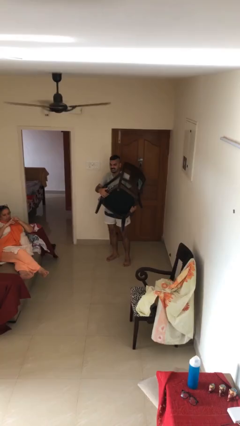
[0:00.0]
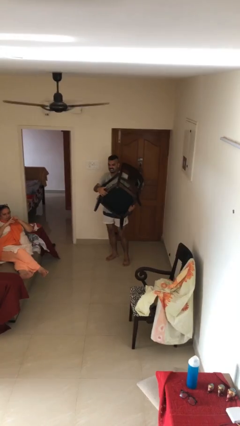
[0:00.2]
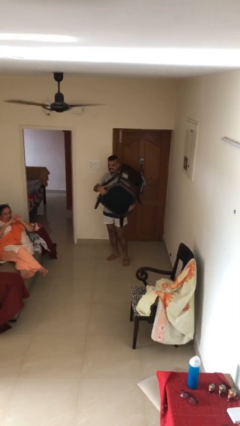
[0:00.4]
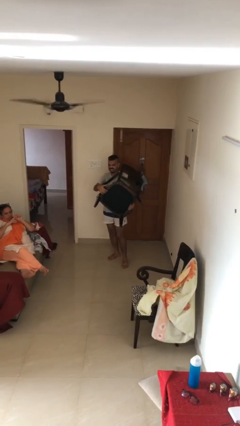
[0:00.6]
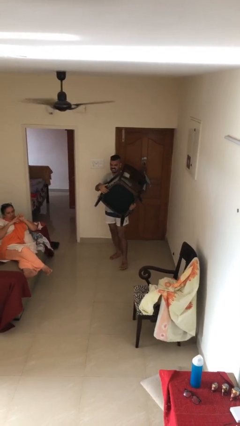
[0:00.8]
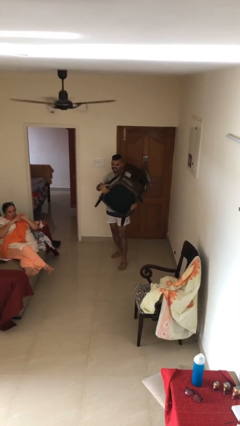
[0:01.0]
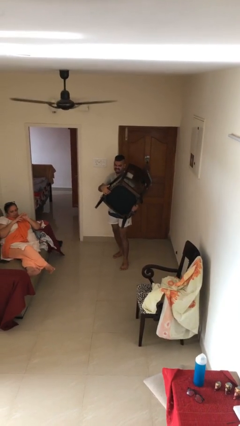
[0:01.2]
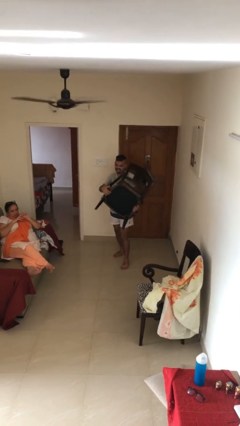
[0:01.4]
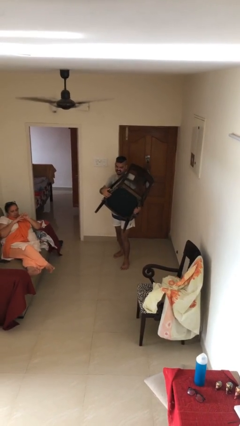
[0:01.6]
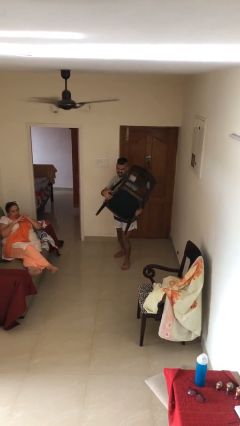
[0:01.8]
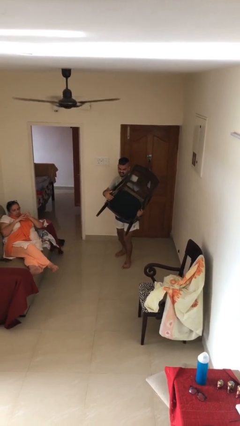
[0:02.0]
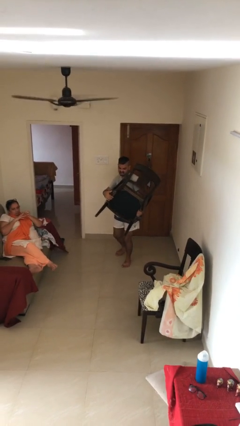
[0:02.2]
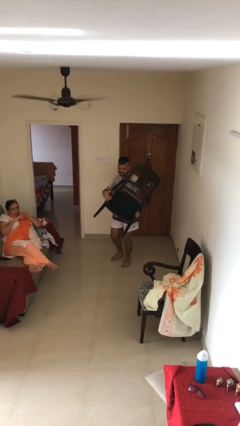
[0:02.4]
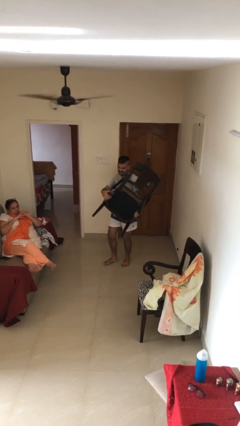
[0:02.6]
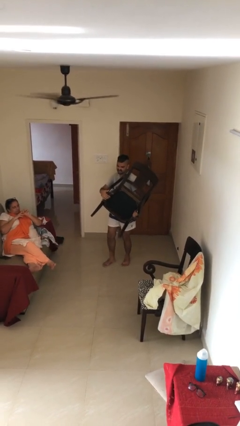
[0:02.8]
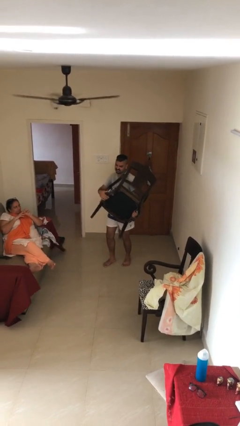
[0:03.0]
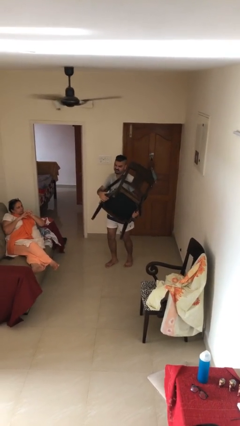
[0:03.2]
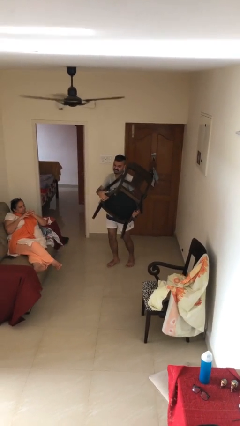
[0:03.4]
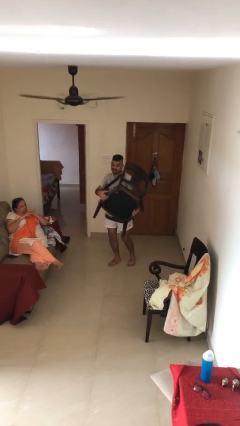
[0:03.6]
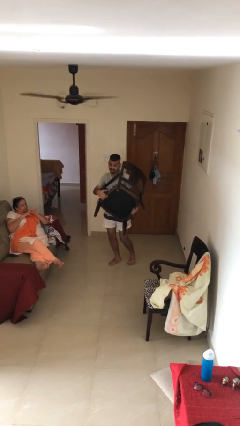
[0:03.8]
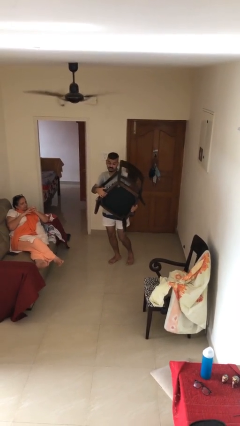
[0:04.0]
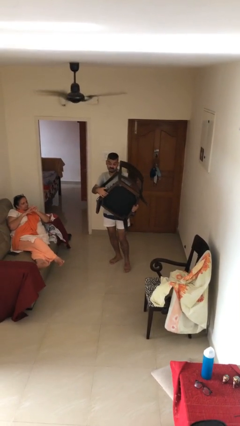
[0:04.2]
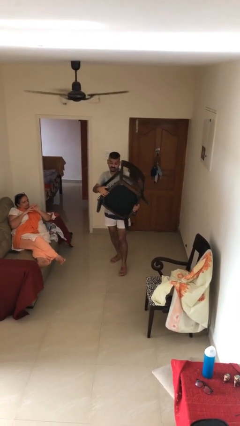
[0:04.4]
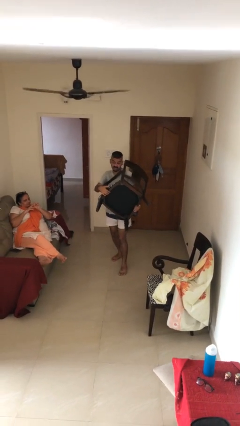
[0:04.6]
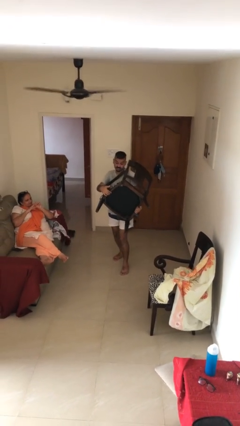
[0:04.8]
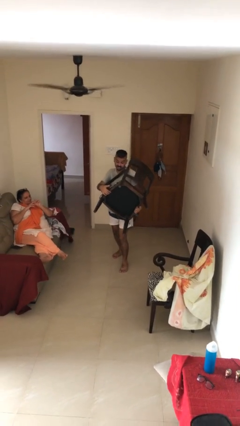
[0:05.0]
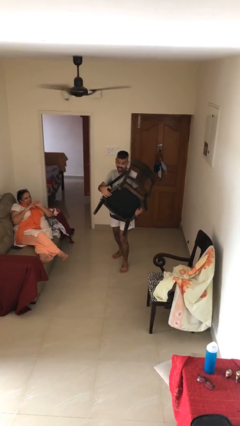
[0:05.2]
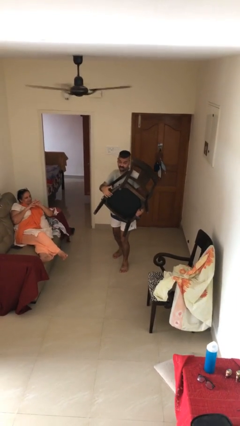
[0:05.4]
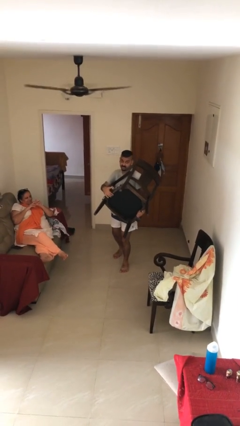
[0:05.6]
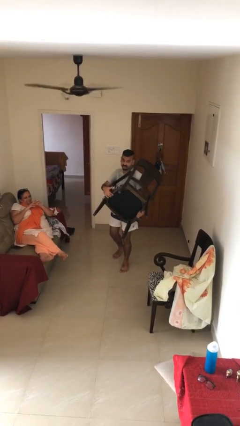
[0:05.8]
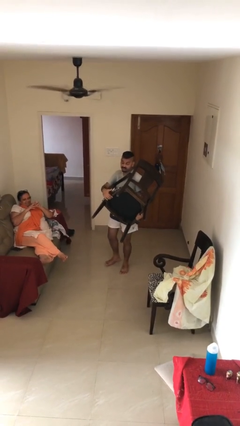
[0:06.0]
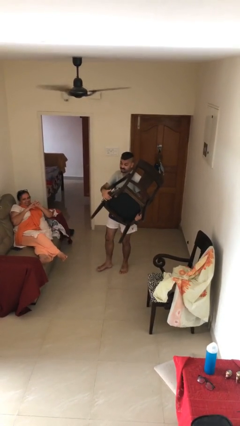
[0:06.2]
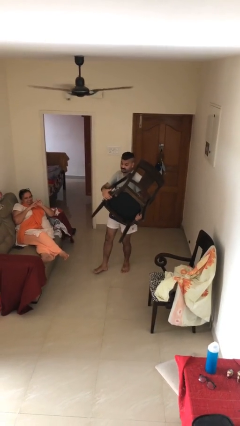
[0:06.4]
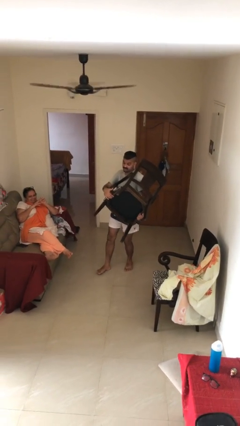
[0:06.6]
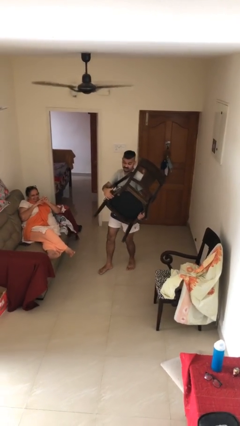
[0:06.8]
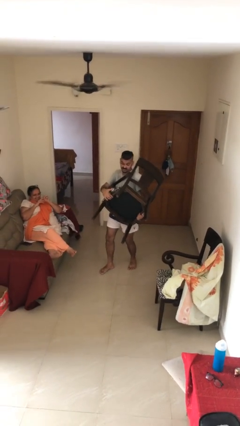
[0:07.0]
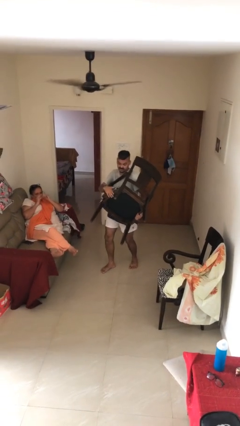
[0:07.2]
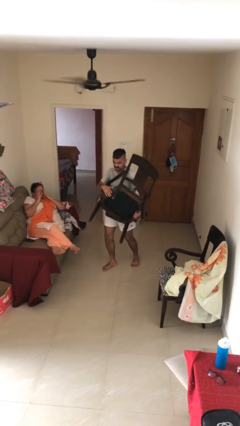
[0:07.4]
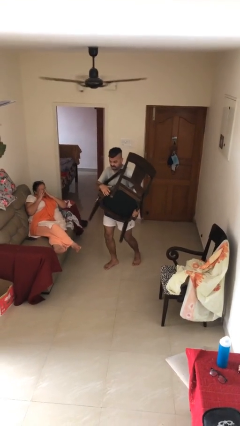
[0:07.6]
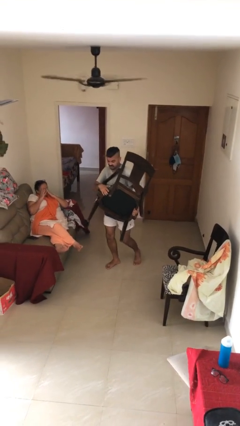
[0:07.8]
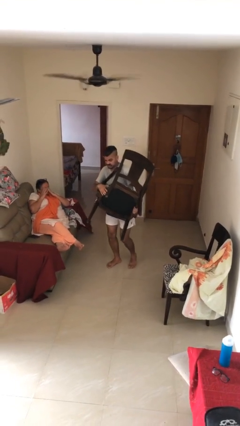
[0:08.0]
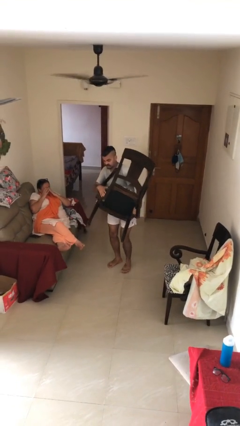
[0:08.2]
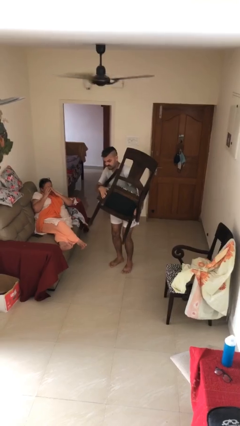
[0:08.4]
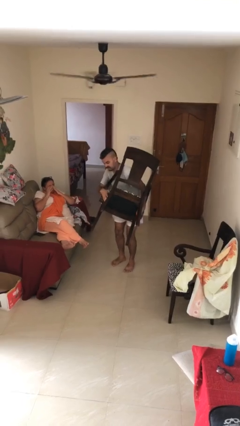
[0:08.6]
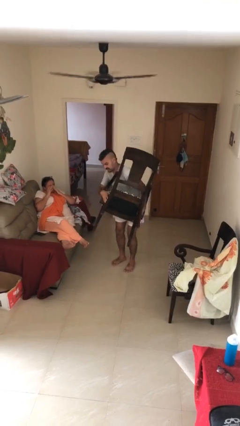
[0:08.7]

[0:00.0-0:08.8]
person carries heavy object

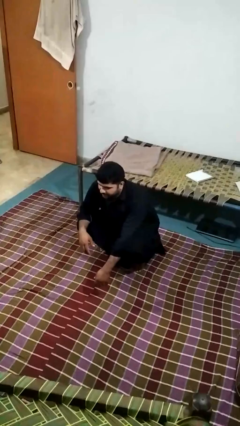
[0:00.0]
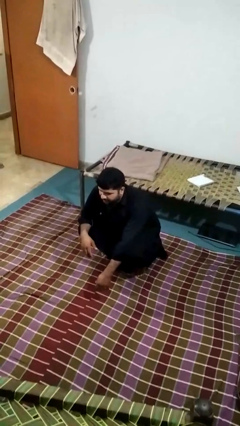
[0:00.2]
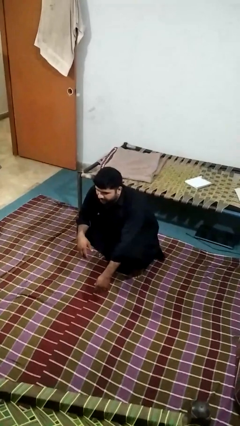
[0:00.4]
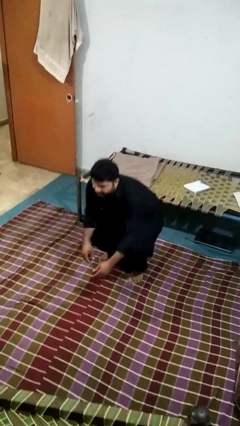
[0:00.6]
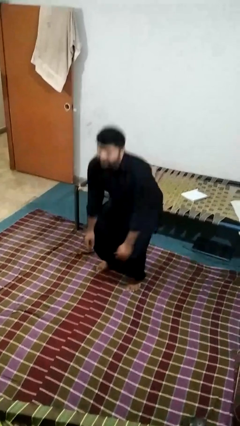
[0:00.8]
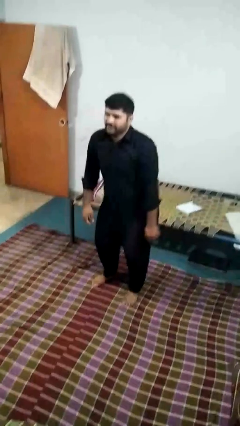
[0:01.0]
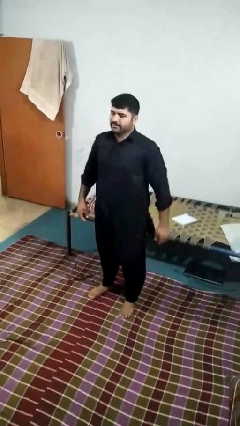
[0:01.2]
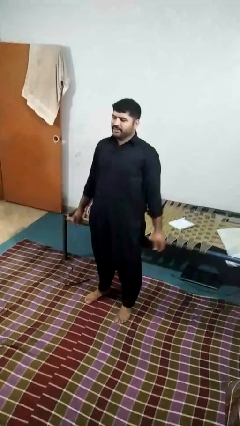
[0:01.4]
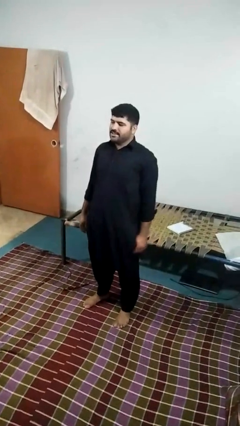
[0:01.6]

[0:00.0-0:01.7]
person stands up

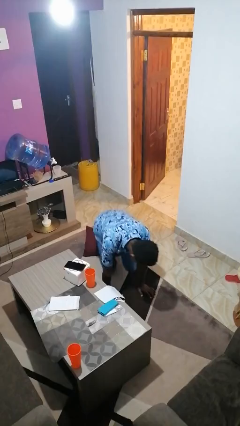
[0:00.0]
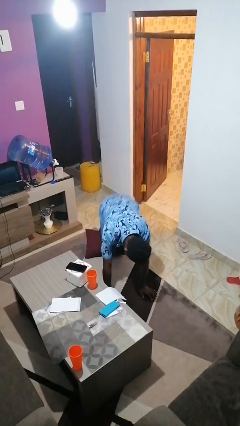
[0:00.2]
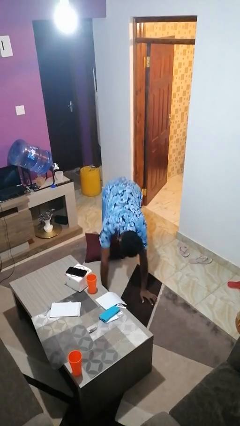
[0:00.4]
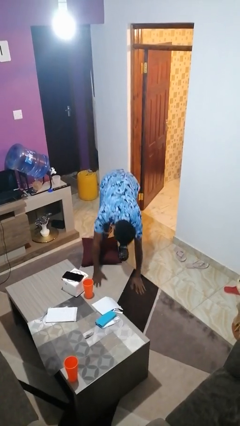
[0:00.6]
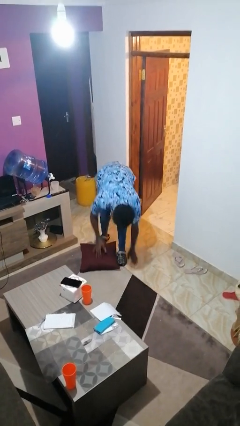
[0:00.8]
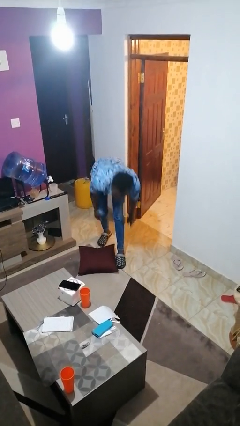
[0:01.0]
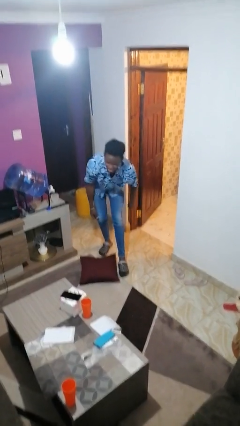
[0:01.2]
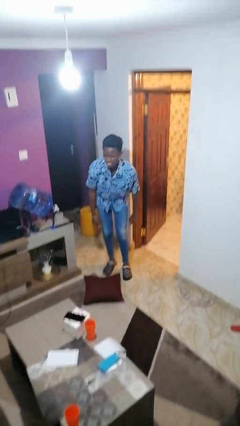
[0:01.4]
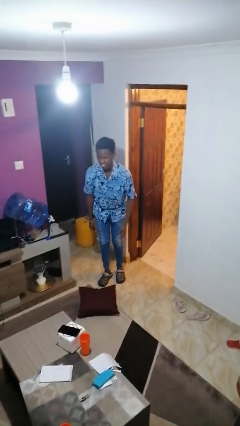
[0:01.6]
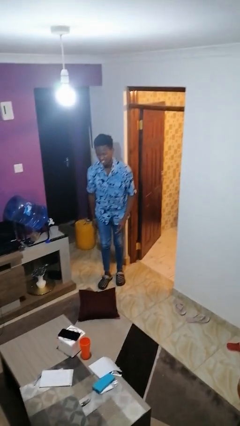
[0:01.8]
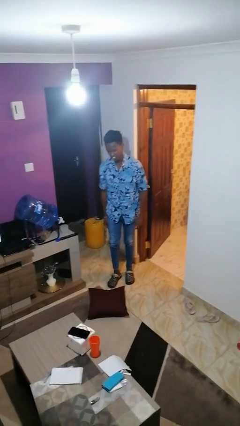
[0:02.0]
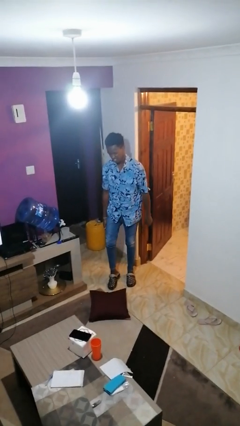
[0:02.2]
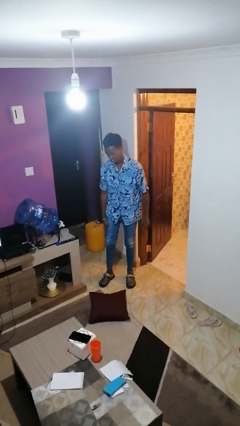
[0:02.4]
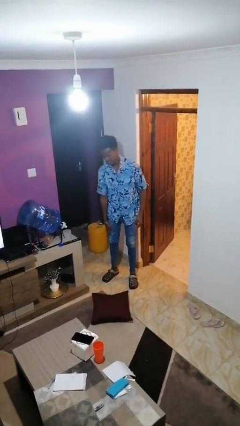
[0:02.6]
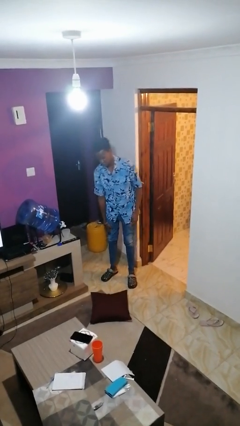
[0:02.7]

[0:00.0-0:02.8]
person stands up from floor

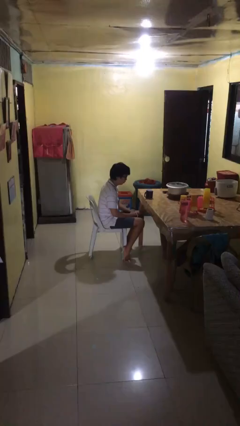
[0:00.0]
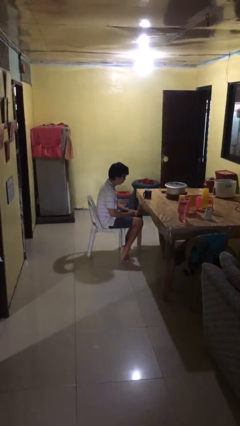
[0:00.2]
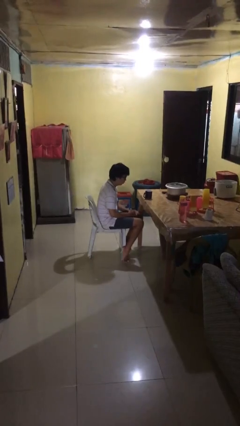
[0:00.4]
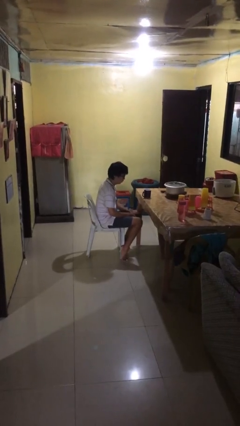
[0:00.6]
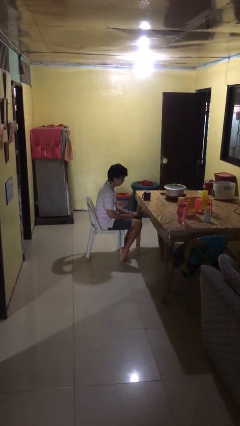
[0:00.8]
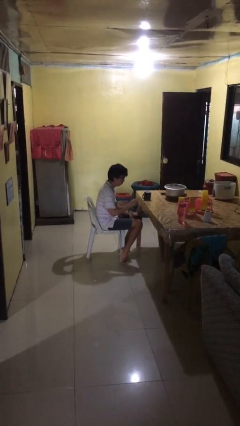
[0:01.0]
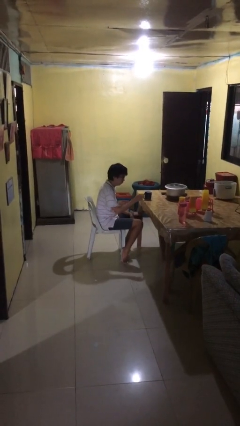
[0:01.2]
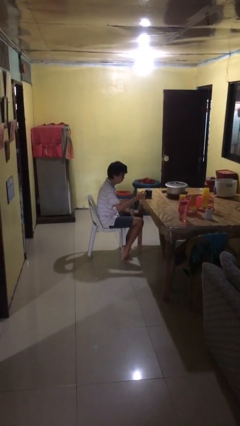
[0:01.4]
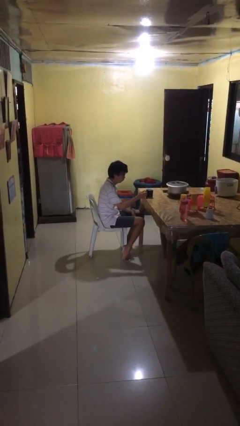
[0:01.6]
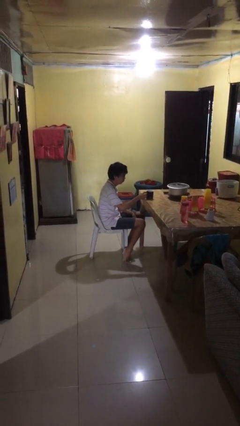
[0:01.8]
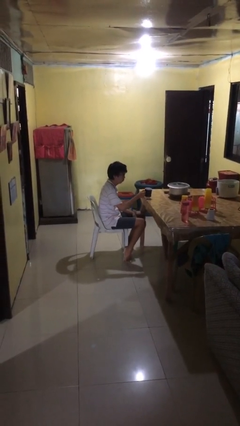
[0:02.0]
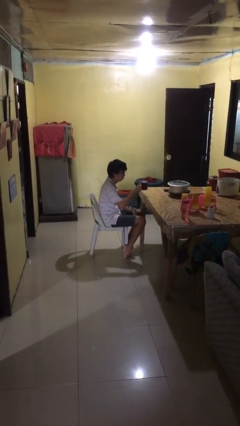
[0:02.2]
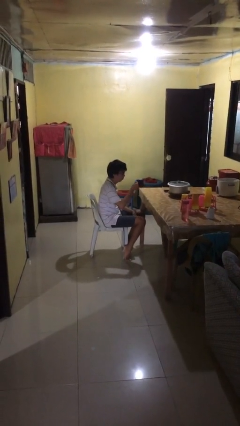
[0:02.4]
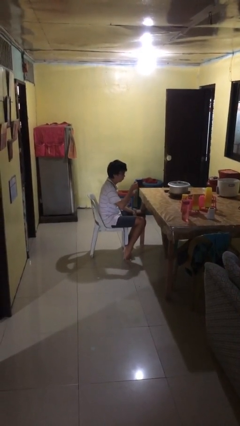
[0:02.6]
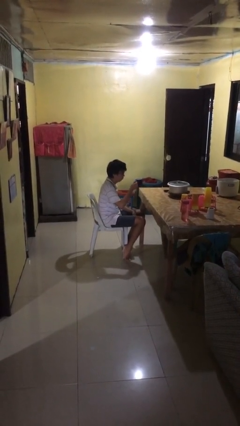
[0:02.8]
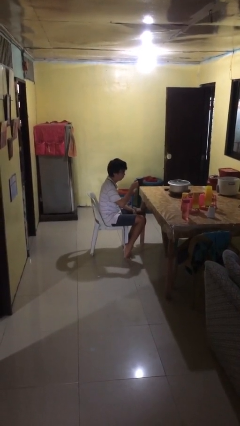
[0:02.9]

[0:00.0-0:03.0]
person picks up object from table

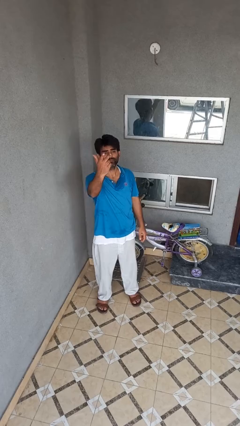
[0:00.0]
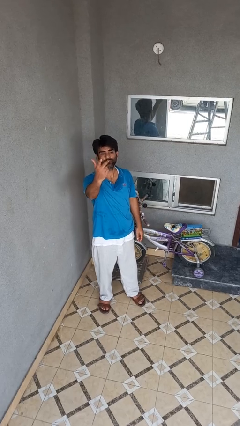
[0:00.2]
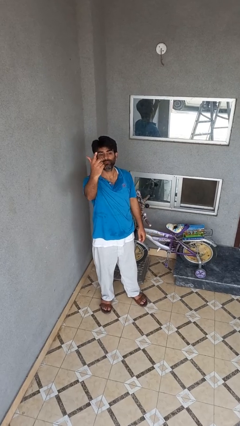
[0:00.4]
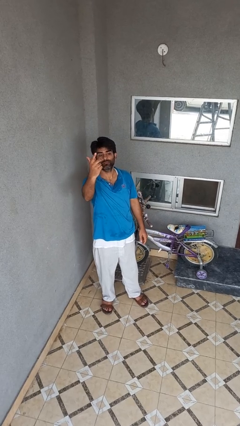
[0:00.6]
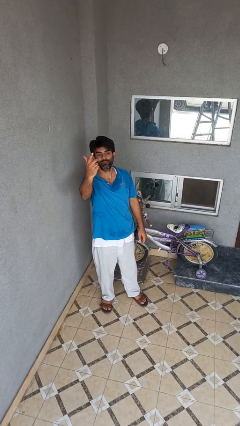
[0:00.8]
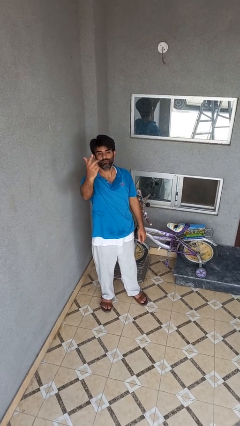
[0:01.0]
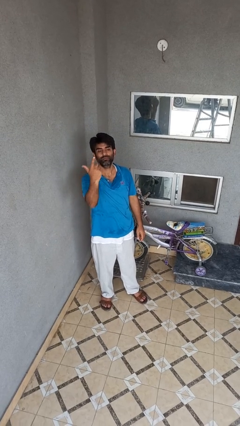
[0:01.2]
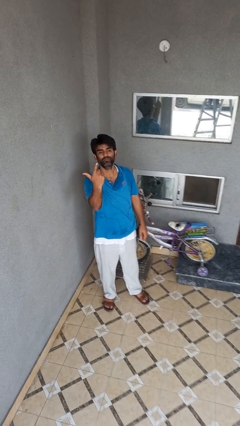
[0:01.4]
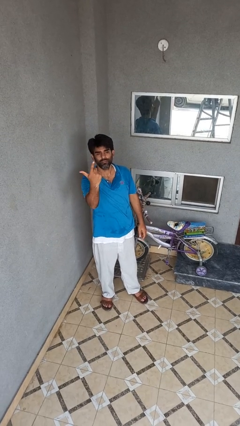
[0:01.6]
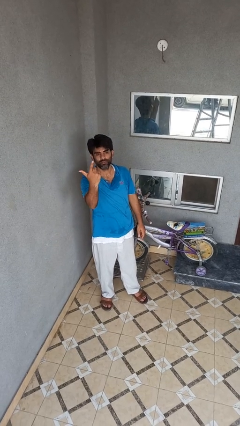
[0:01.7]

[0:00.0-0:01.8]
person gestures raise hand
